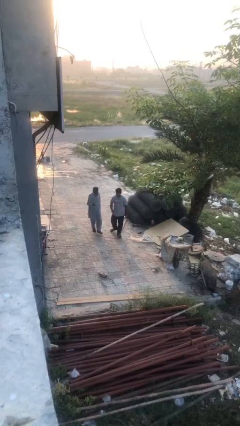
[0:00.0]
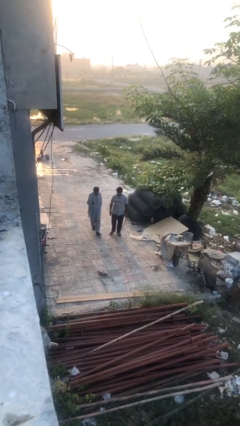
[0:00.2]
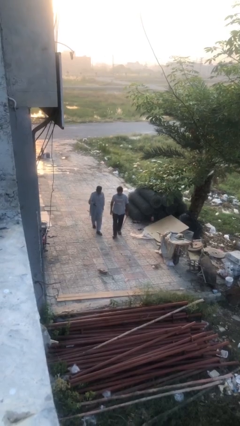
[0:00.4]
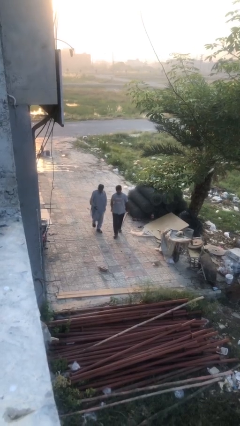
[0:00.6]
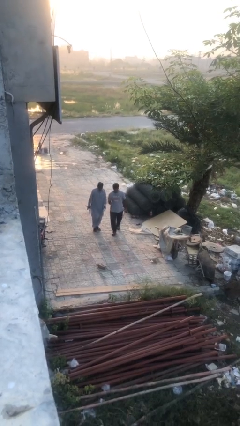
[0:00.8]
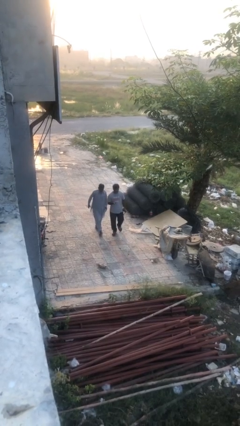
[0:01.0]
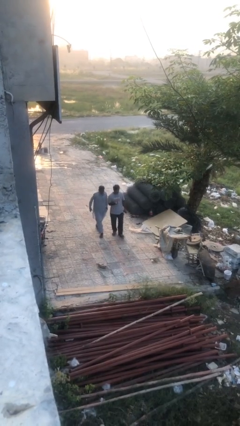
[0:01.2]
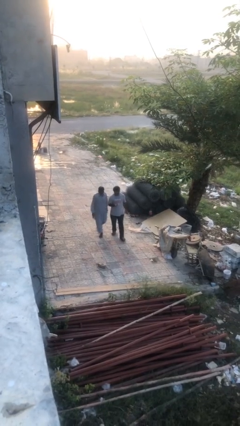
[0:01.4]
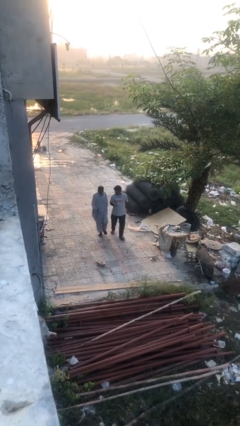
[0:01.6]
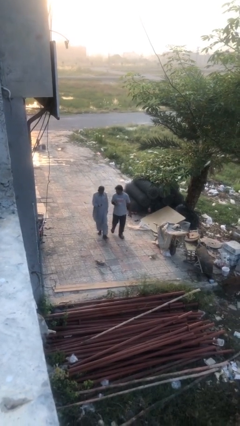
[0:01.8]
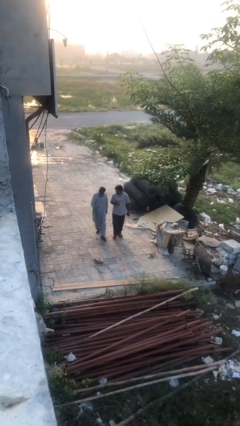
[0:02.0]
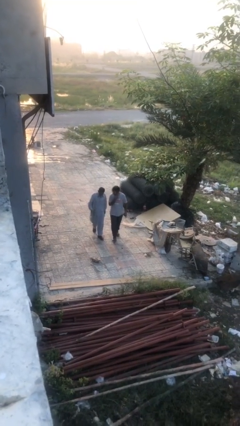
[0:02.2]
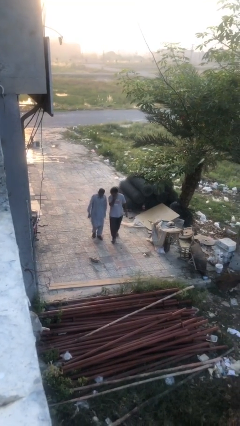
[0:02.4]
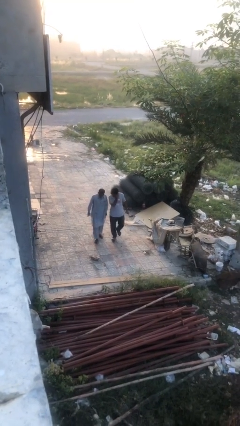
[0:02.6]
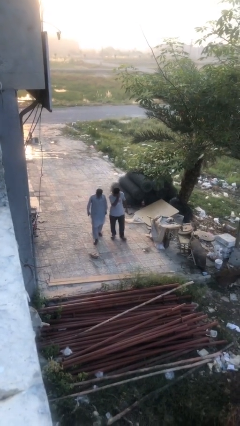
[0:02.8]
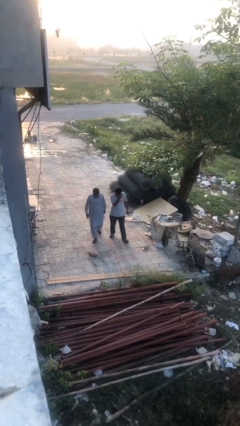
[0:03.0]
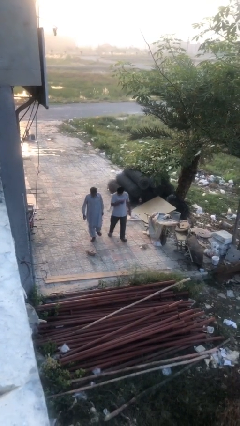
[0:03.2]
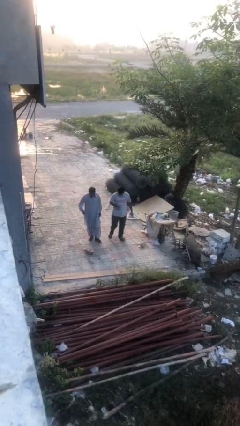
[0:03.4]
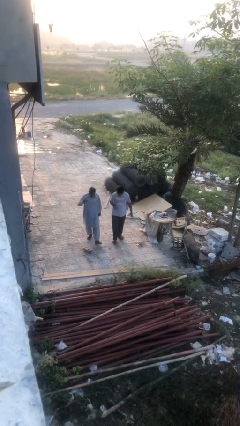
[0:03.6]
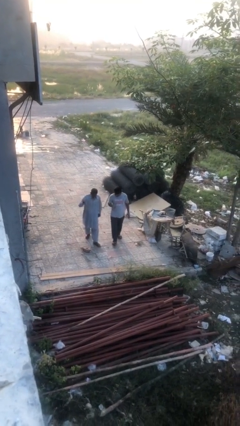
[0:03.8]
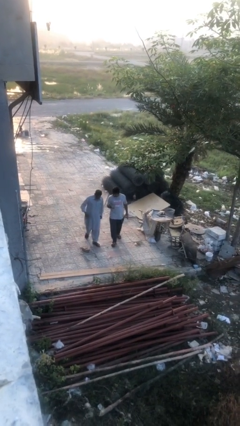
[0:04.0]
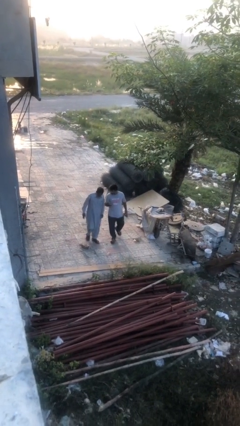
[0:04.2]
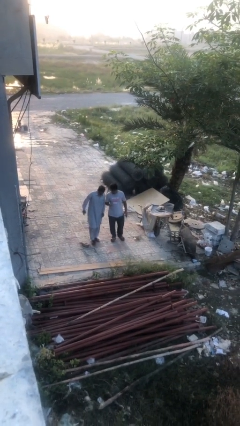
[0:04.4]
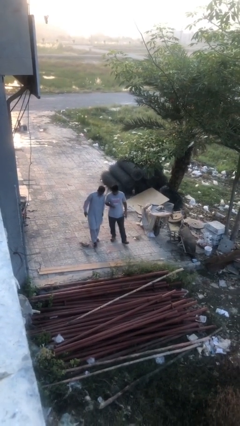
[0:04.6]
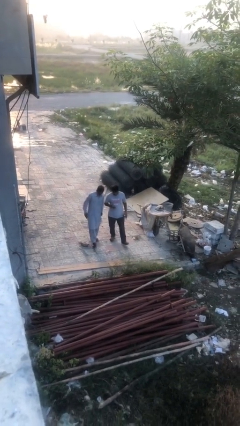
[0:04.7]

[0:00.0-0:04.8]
person talks to person

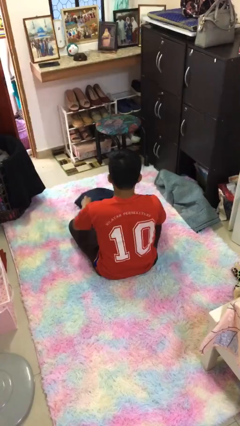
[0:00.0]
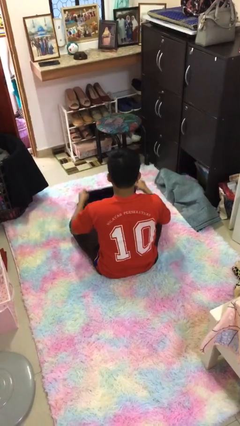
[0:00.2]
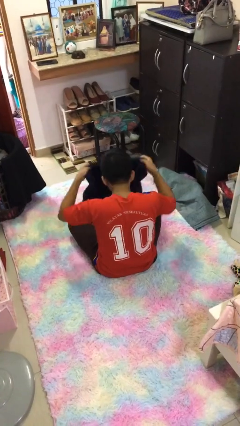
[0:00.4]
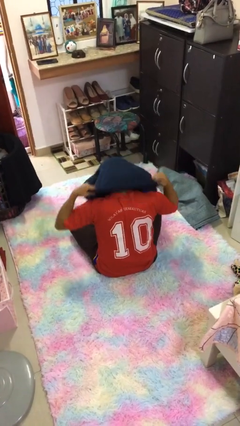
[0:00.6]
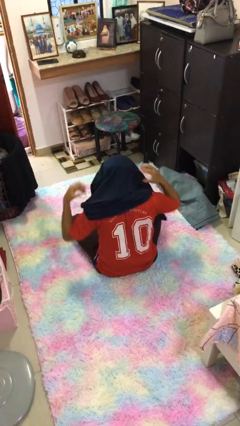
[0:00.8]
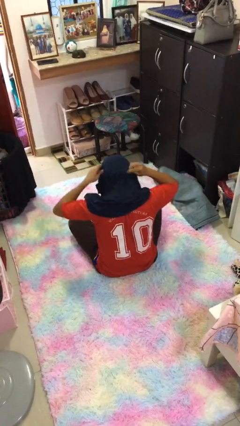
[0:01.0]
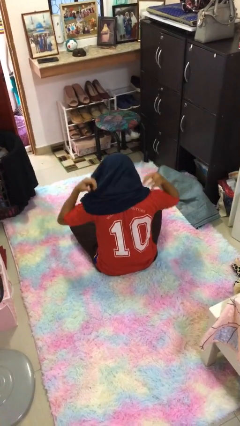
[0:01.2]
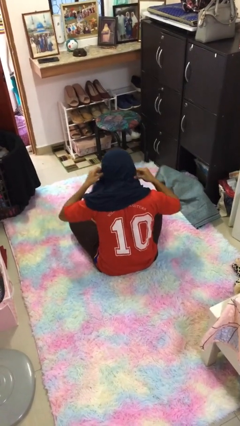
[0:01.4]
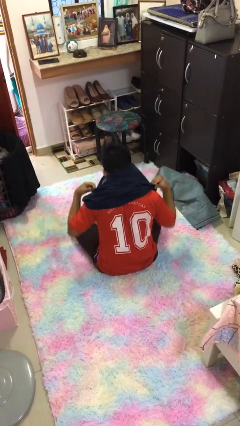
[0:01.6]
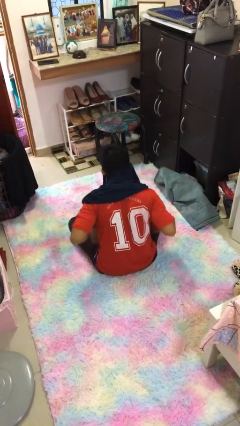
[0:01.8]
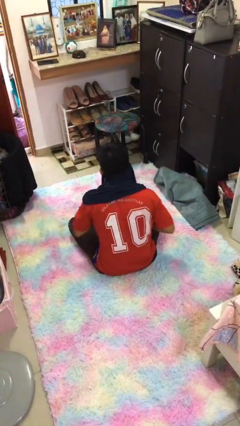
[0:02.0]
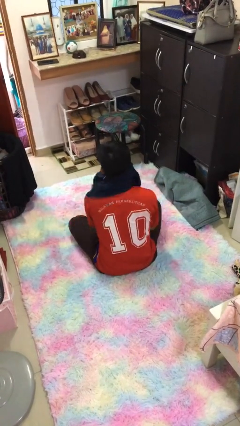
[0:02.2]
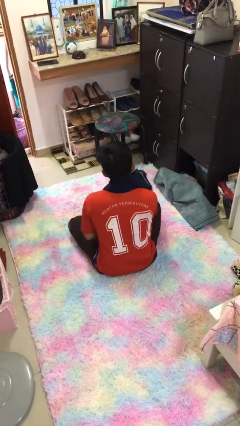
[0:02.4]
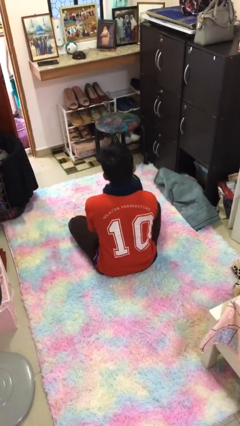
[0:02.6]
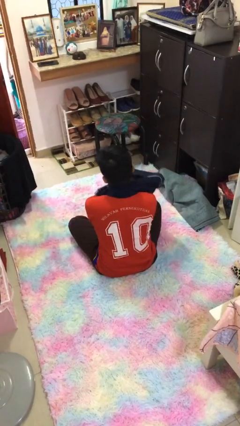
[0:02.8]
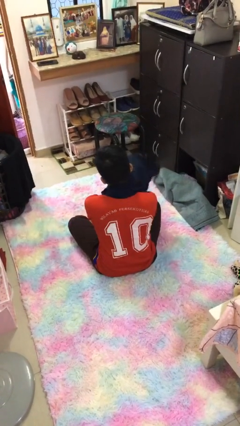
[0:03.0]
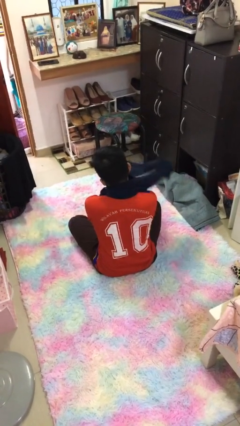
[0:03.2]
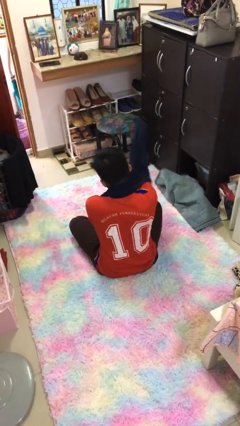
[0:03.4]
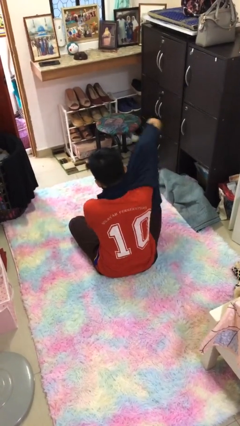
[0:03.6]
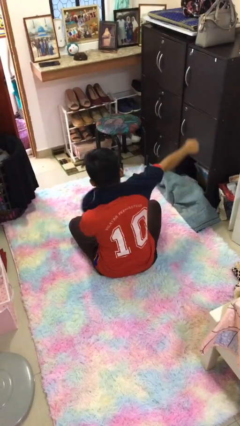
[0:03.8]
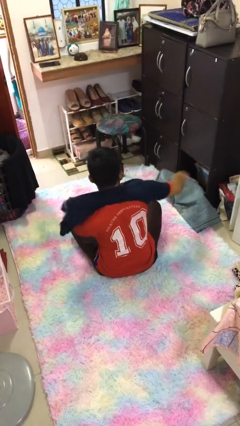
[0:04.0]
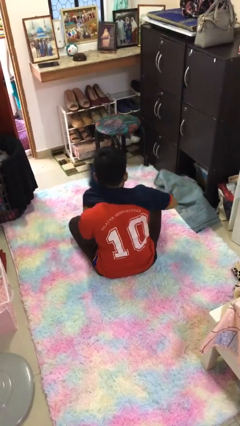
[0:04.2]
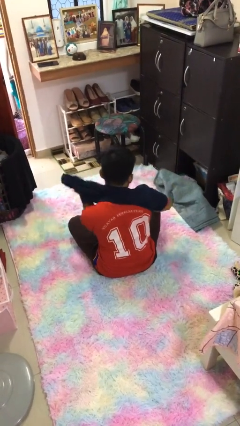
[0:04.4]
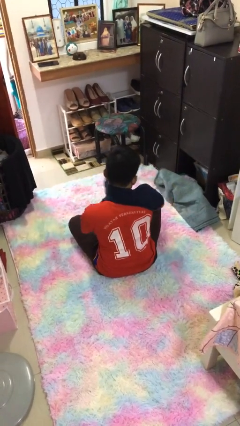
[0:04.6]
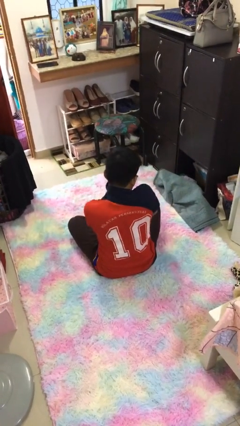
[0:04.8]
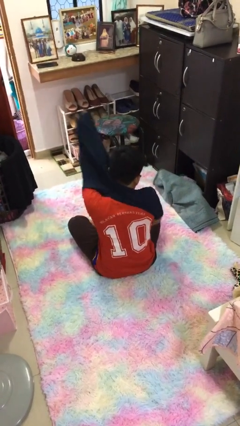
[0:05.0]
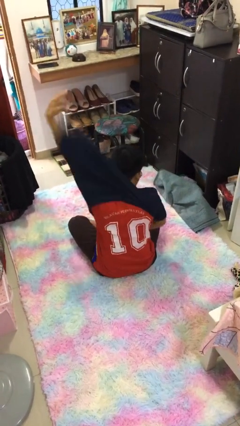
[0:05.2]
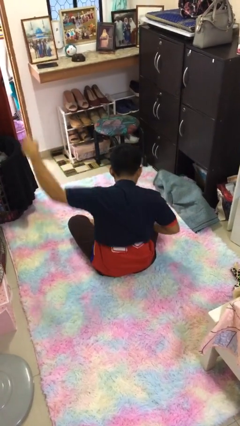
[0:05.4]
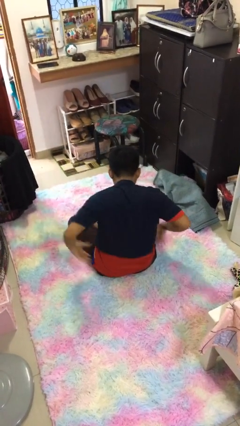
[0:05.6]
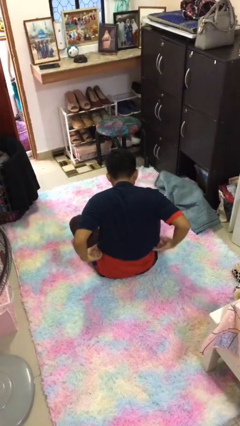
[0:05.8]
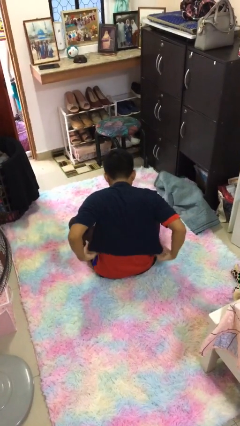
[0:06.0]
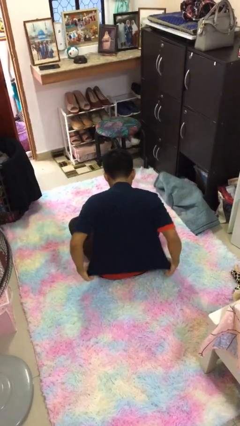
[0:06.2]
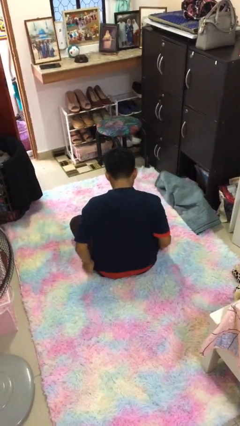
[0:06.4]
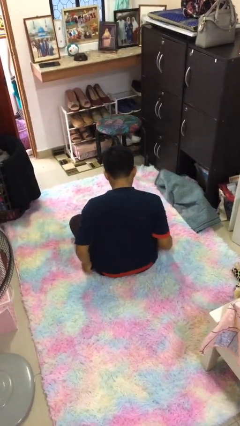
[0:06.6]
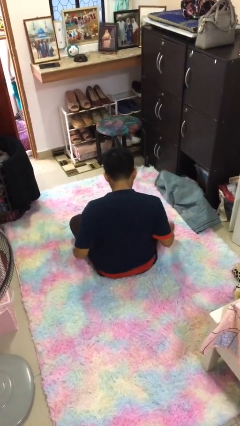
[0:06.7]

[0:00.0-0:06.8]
person puts on shirt

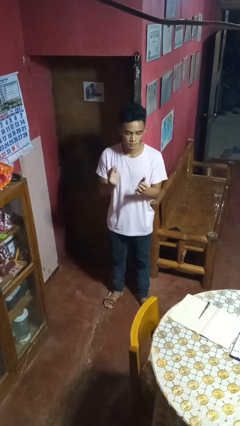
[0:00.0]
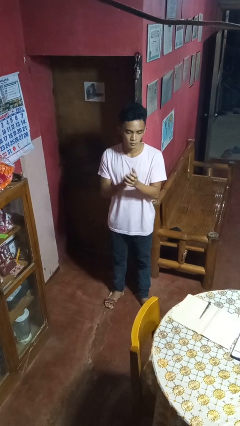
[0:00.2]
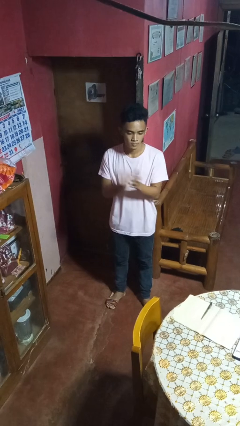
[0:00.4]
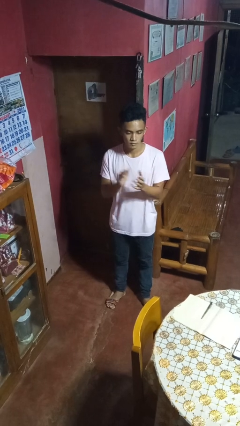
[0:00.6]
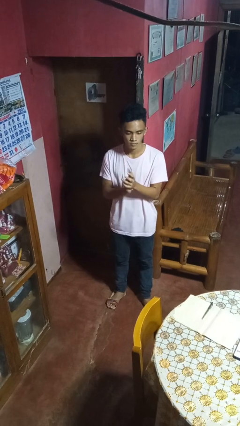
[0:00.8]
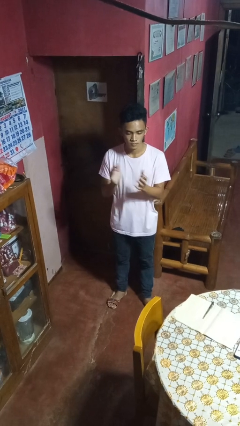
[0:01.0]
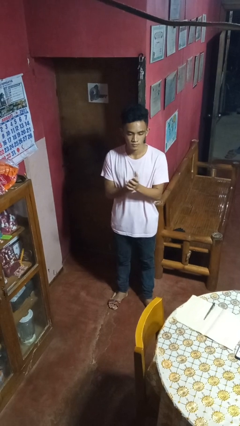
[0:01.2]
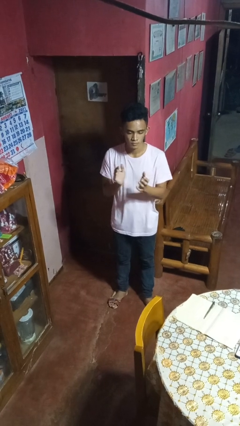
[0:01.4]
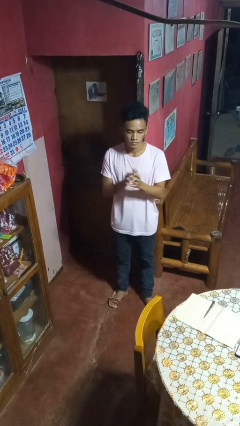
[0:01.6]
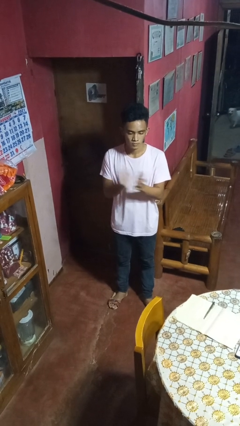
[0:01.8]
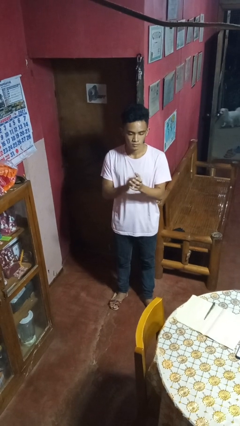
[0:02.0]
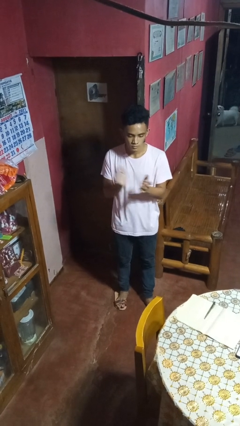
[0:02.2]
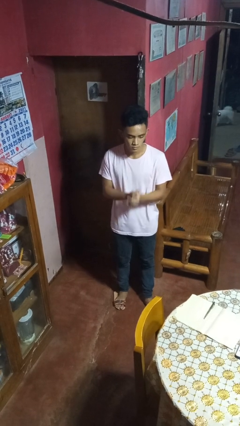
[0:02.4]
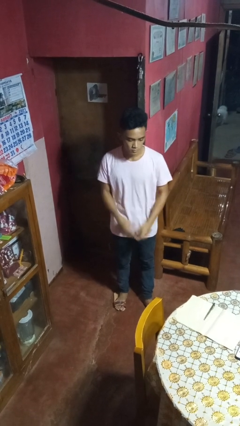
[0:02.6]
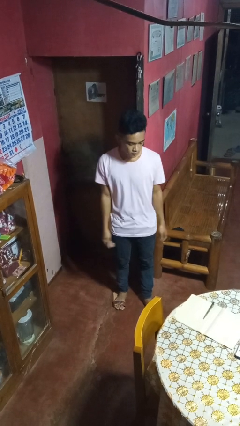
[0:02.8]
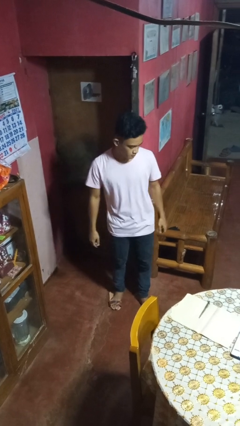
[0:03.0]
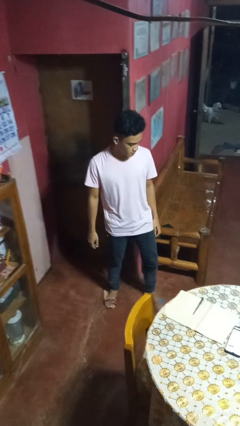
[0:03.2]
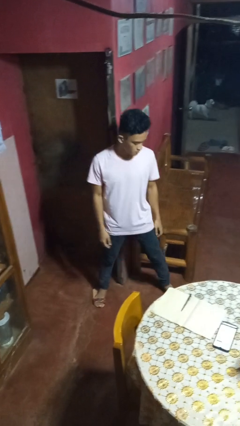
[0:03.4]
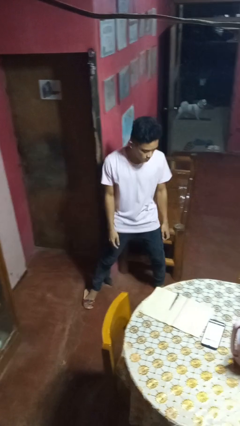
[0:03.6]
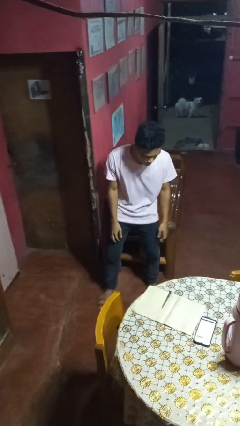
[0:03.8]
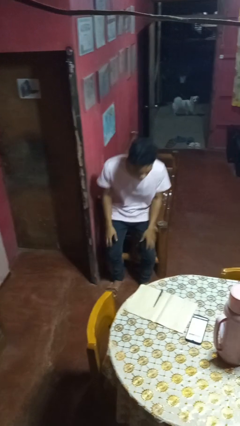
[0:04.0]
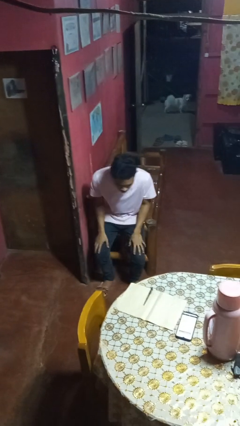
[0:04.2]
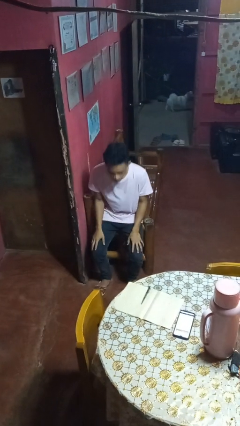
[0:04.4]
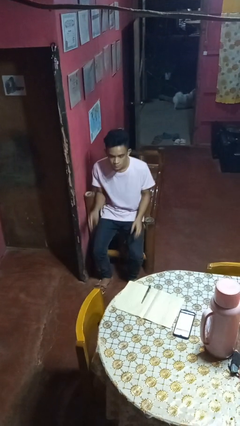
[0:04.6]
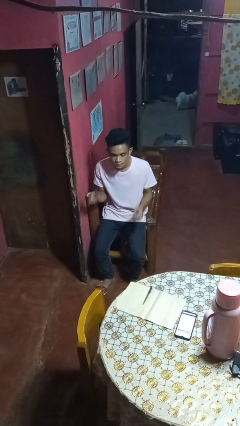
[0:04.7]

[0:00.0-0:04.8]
person claps hands

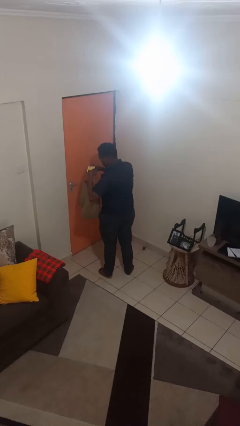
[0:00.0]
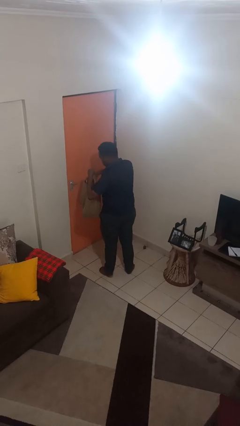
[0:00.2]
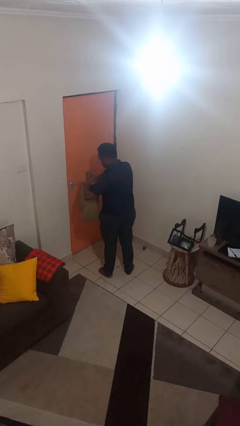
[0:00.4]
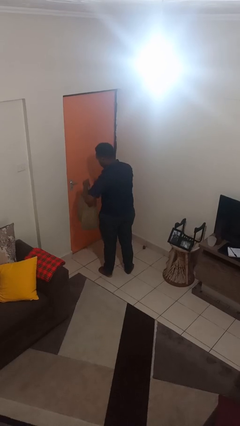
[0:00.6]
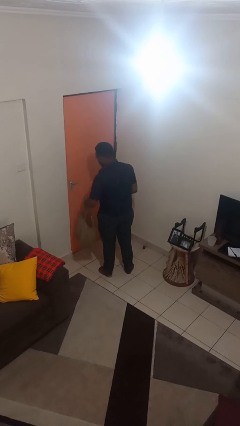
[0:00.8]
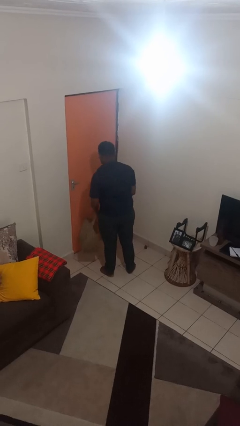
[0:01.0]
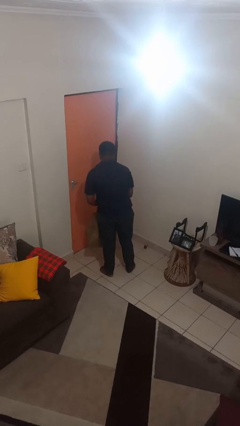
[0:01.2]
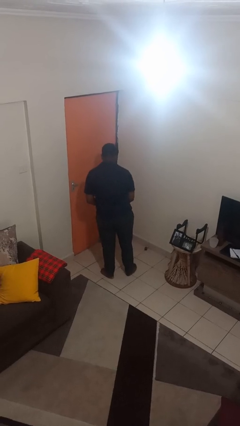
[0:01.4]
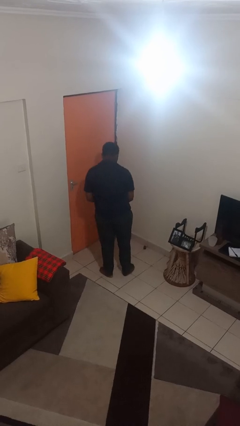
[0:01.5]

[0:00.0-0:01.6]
person puts object into bag
